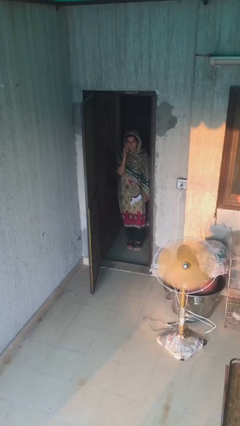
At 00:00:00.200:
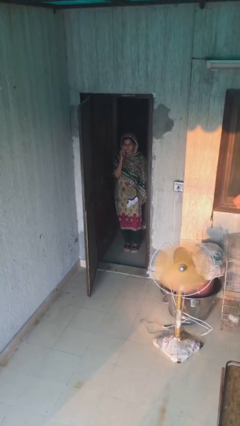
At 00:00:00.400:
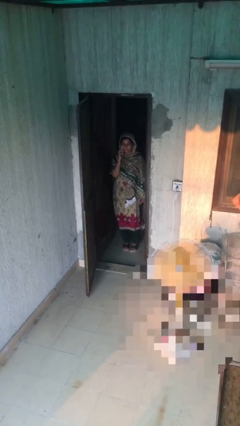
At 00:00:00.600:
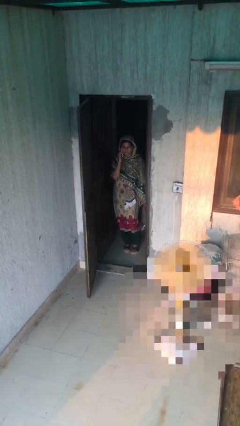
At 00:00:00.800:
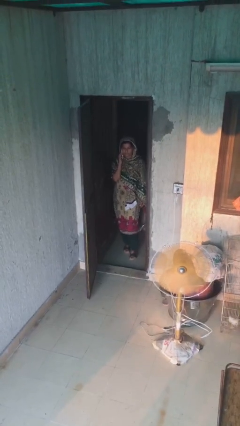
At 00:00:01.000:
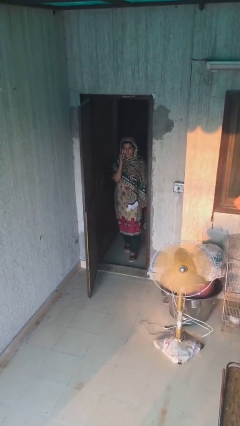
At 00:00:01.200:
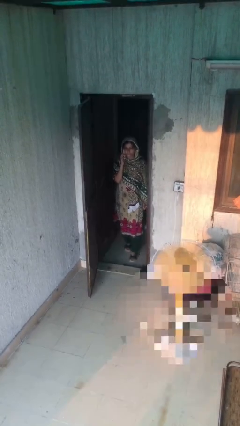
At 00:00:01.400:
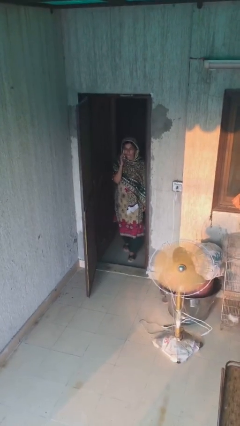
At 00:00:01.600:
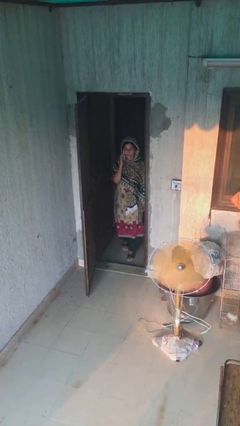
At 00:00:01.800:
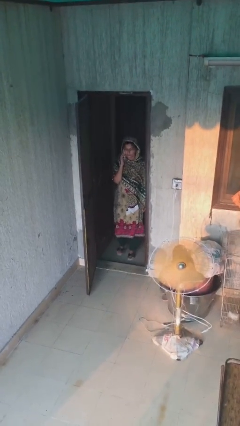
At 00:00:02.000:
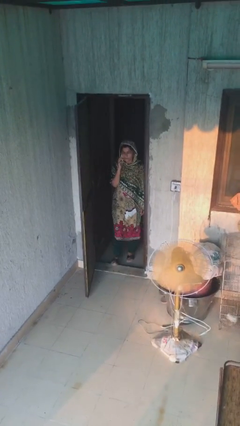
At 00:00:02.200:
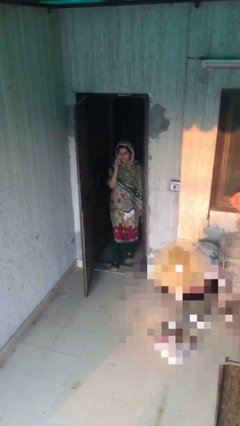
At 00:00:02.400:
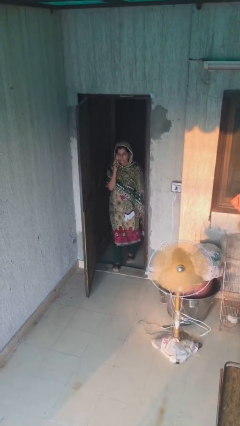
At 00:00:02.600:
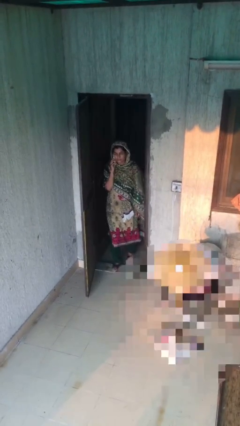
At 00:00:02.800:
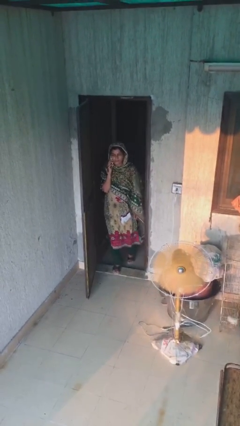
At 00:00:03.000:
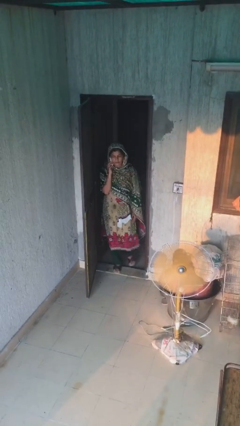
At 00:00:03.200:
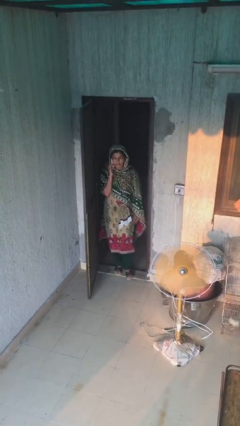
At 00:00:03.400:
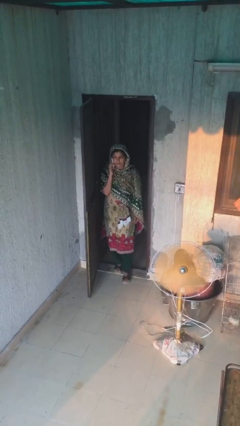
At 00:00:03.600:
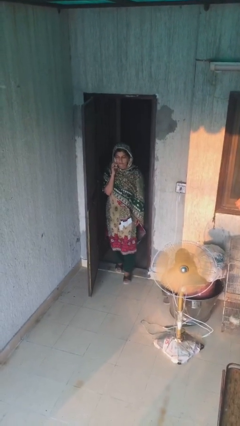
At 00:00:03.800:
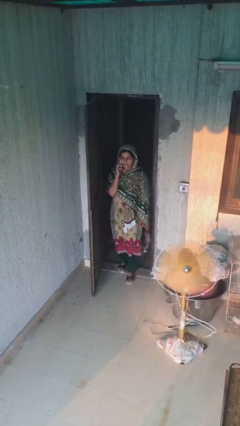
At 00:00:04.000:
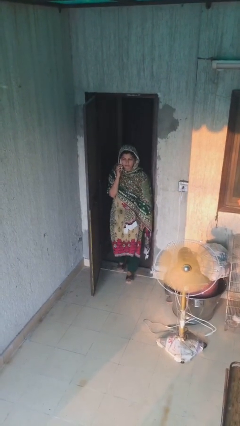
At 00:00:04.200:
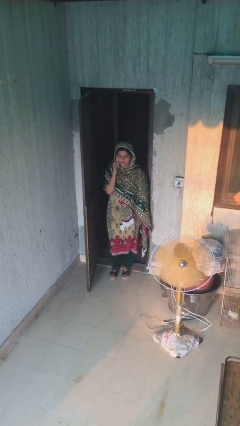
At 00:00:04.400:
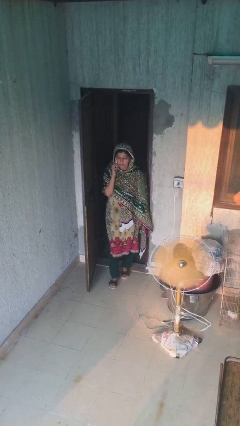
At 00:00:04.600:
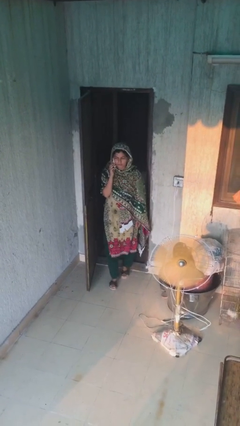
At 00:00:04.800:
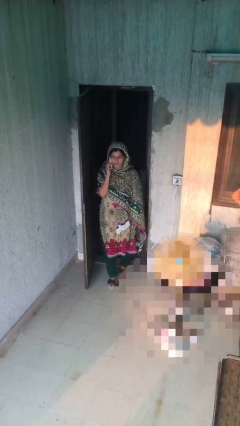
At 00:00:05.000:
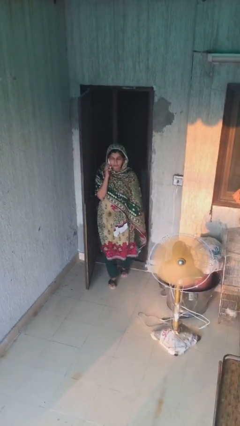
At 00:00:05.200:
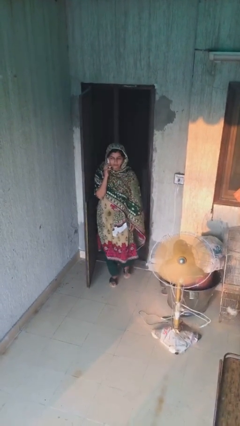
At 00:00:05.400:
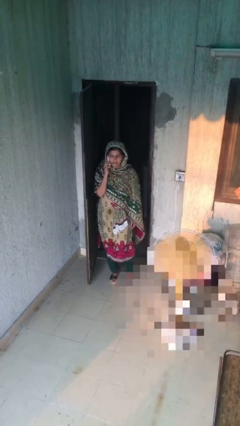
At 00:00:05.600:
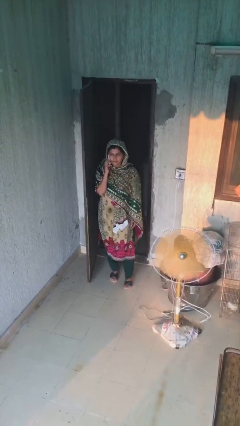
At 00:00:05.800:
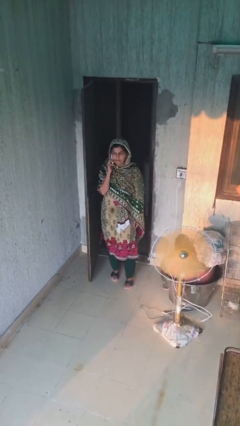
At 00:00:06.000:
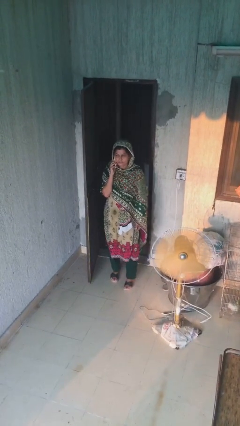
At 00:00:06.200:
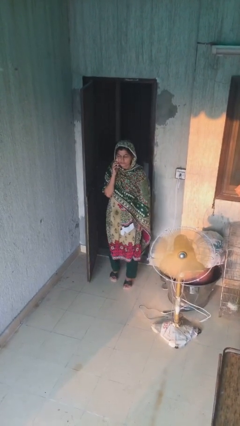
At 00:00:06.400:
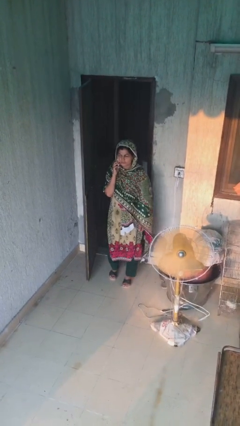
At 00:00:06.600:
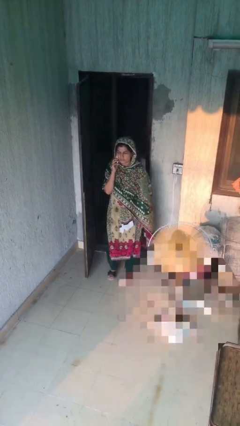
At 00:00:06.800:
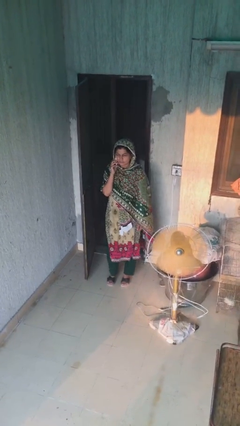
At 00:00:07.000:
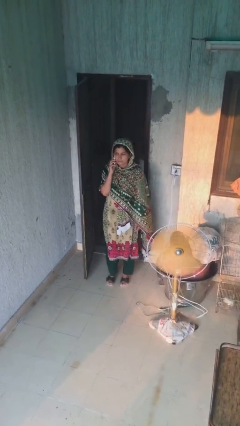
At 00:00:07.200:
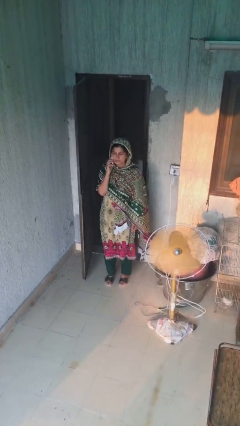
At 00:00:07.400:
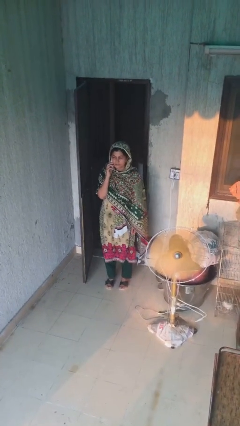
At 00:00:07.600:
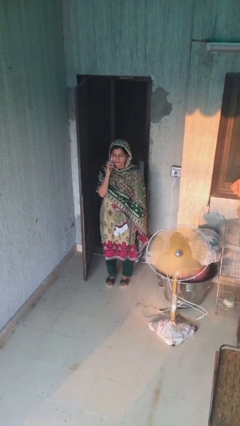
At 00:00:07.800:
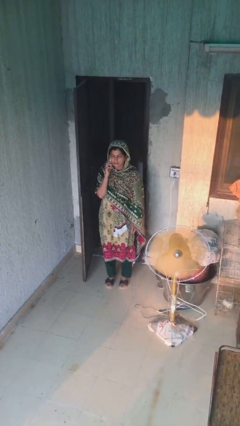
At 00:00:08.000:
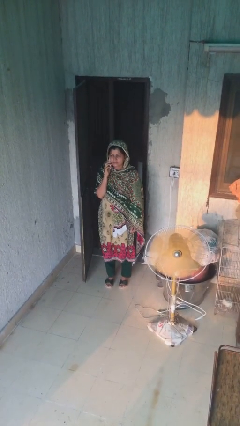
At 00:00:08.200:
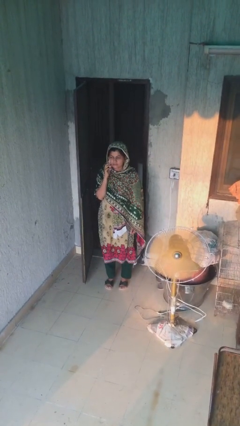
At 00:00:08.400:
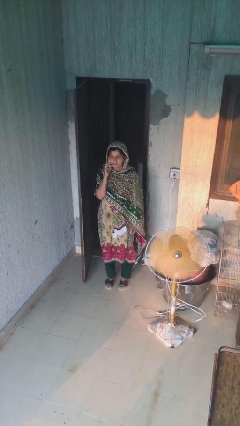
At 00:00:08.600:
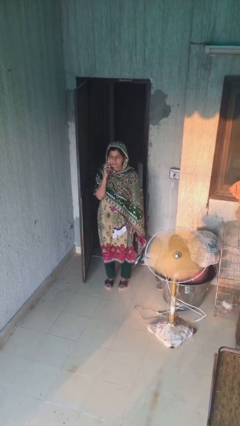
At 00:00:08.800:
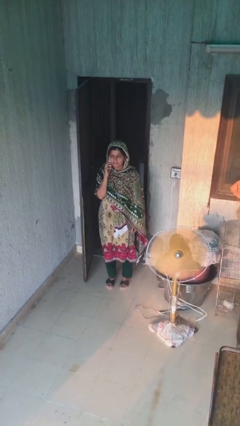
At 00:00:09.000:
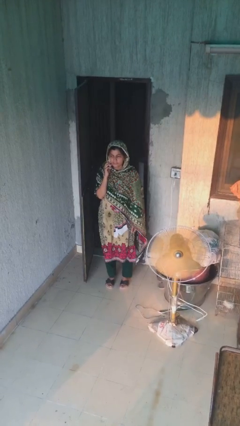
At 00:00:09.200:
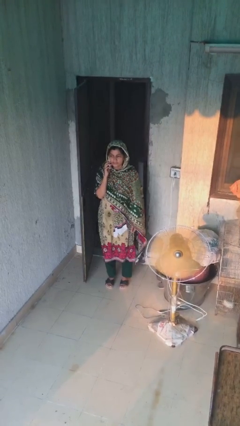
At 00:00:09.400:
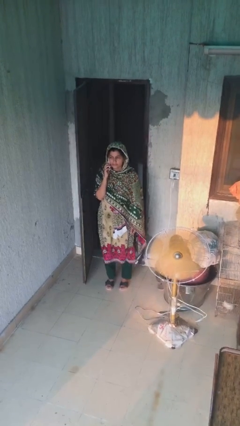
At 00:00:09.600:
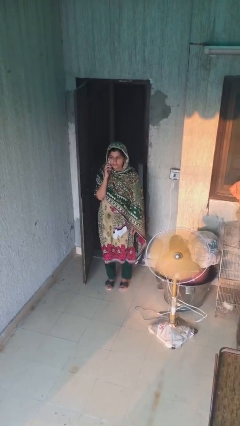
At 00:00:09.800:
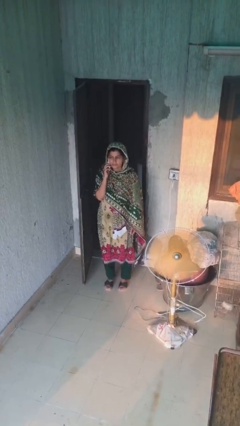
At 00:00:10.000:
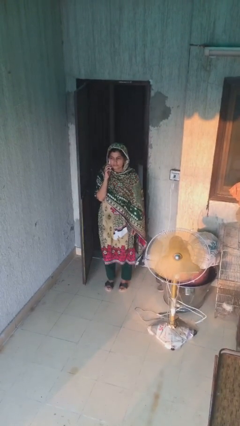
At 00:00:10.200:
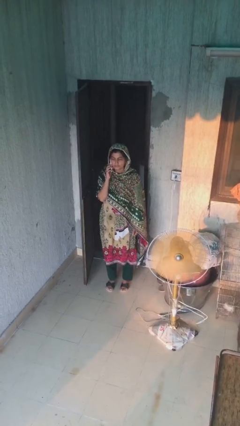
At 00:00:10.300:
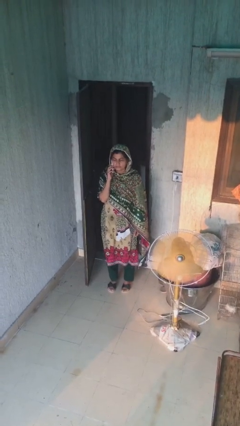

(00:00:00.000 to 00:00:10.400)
person enters scene through structure

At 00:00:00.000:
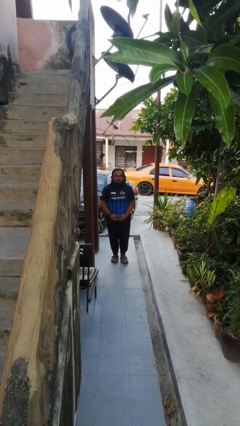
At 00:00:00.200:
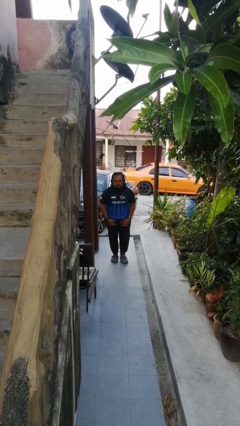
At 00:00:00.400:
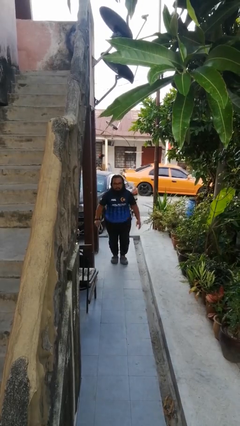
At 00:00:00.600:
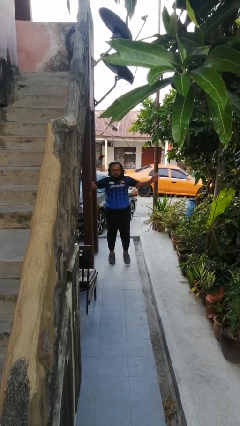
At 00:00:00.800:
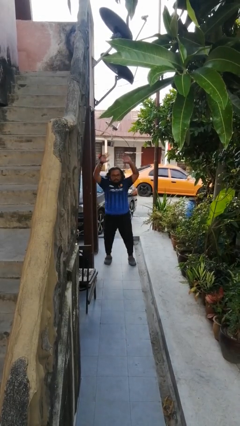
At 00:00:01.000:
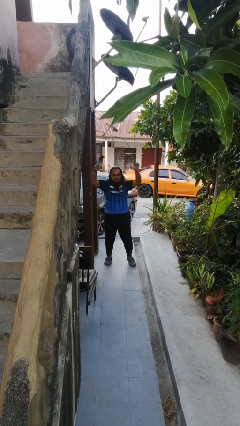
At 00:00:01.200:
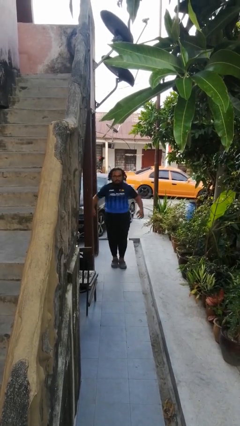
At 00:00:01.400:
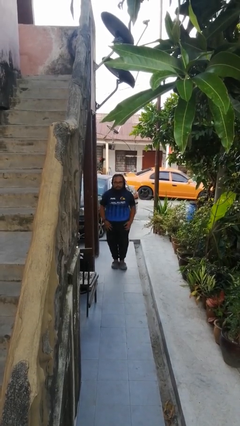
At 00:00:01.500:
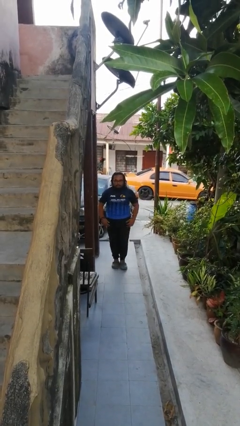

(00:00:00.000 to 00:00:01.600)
person exercises with jumping jacks

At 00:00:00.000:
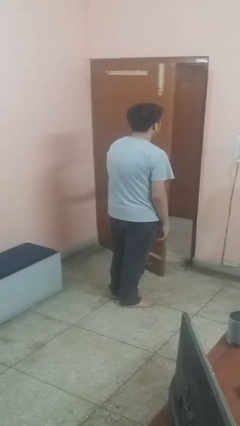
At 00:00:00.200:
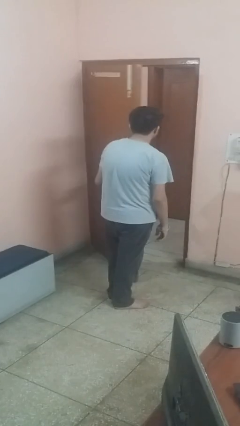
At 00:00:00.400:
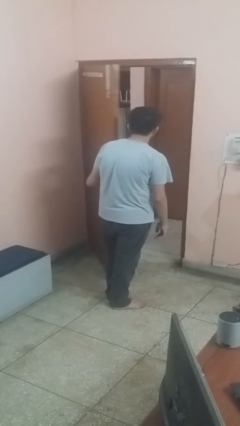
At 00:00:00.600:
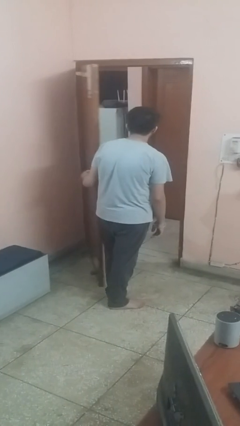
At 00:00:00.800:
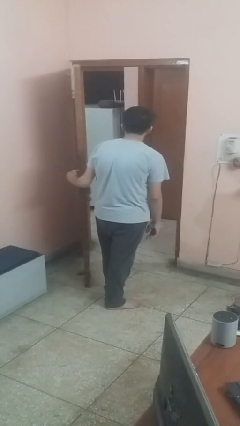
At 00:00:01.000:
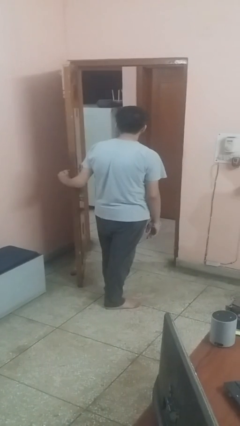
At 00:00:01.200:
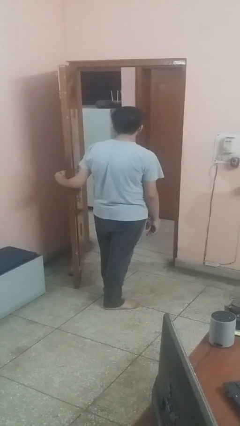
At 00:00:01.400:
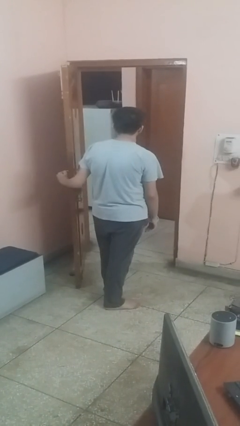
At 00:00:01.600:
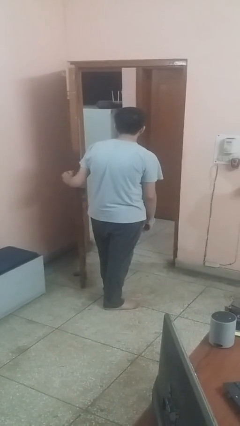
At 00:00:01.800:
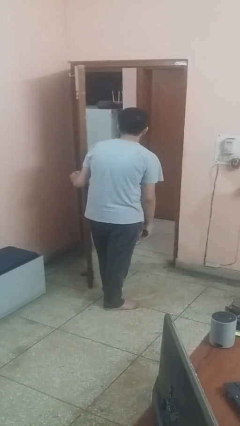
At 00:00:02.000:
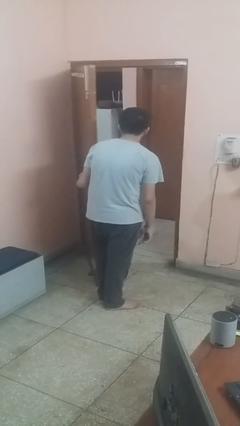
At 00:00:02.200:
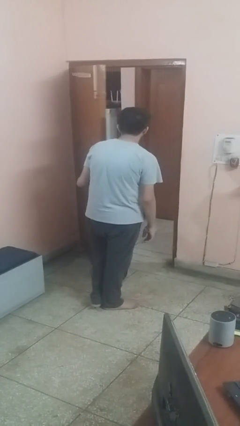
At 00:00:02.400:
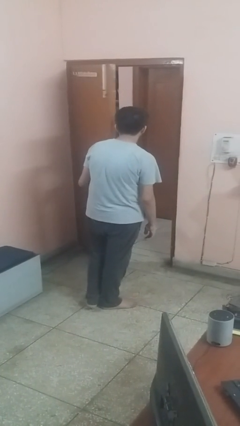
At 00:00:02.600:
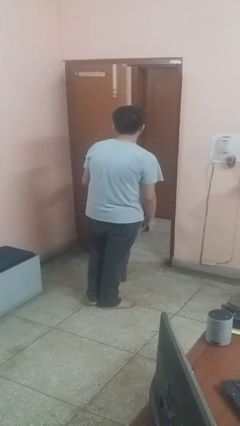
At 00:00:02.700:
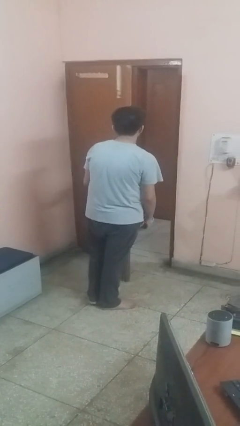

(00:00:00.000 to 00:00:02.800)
person opens facility door

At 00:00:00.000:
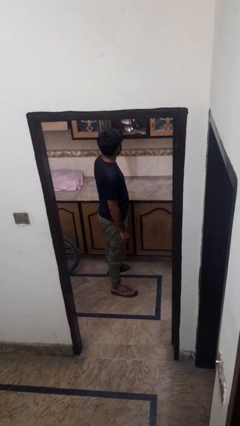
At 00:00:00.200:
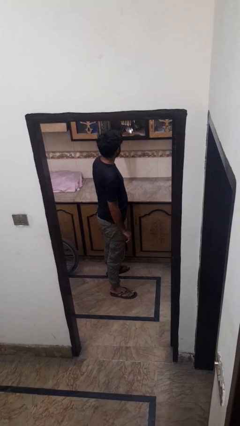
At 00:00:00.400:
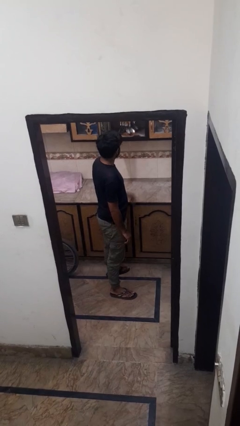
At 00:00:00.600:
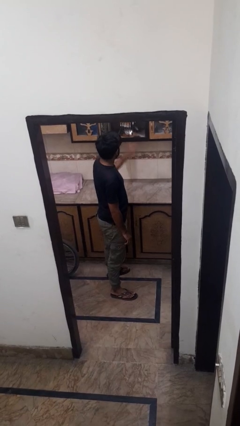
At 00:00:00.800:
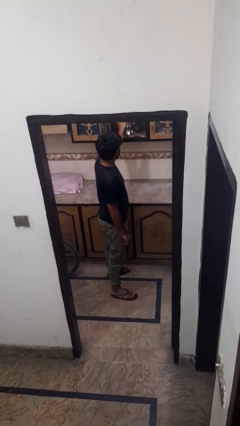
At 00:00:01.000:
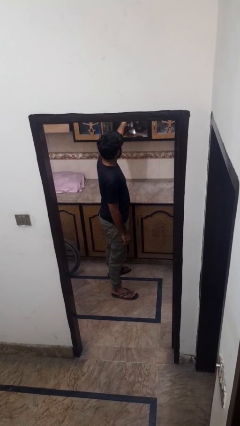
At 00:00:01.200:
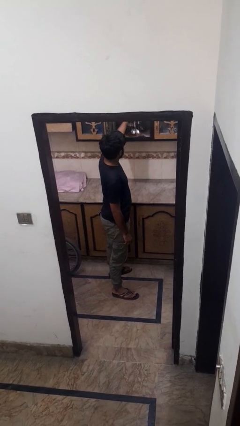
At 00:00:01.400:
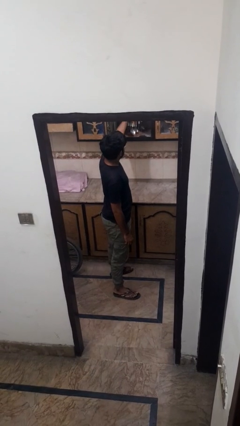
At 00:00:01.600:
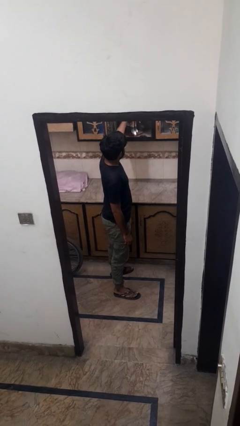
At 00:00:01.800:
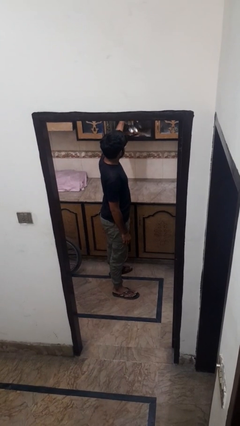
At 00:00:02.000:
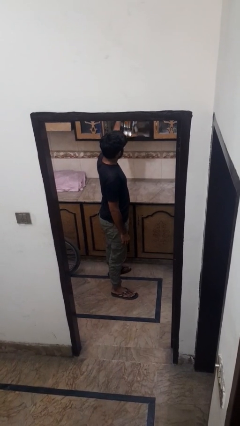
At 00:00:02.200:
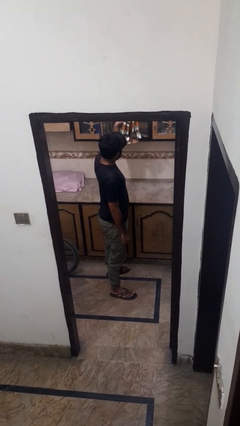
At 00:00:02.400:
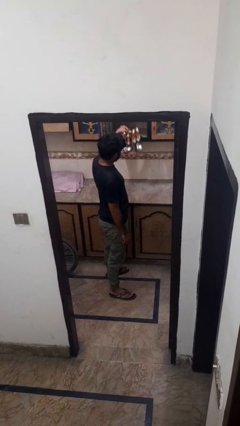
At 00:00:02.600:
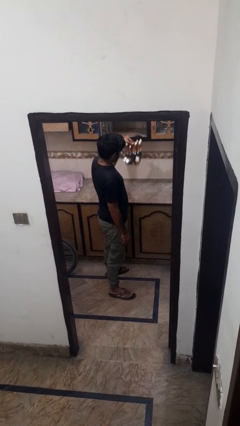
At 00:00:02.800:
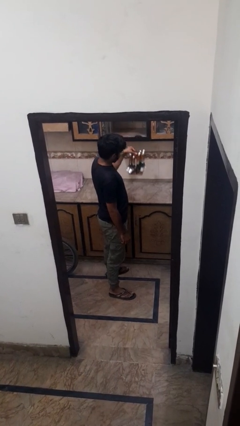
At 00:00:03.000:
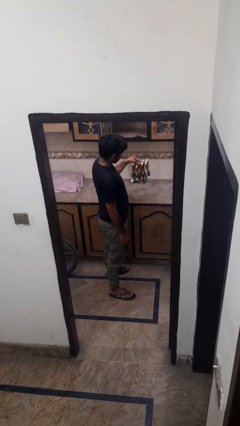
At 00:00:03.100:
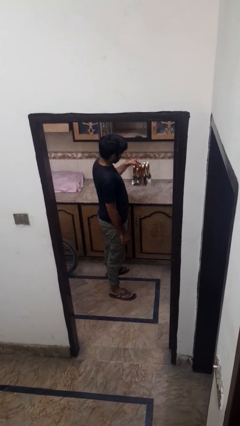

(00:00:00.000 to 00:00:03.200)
person picks up object from cabinet
